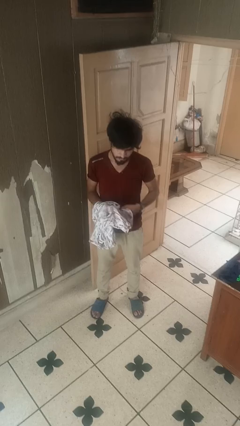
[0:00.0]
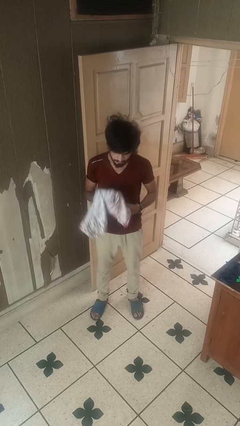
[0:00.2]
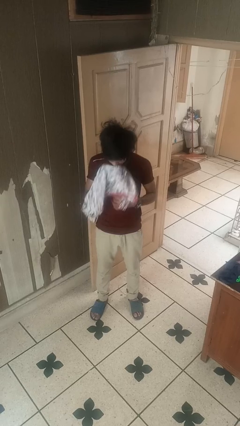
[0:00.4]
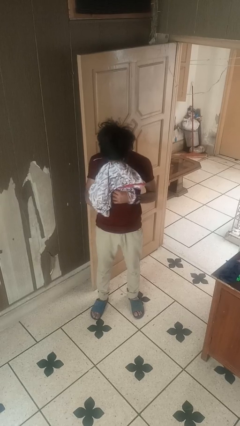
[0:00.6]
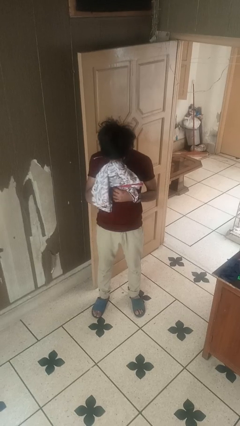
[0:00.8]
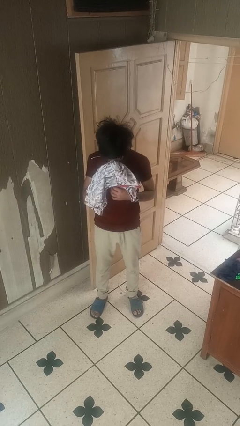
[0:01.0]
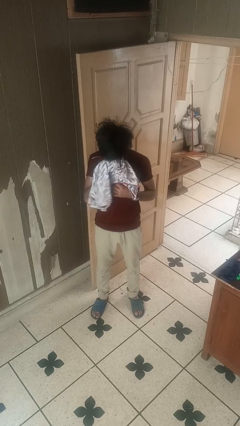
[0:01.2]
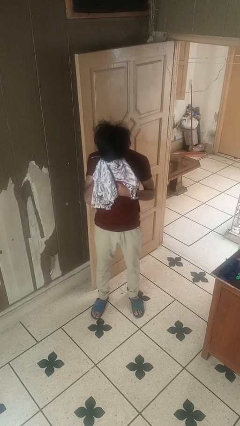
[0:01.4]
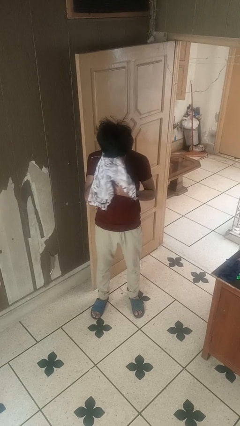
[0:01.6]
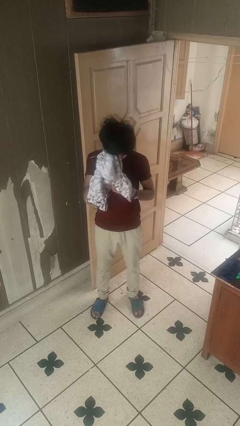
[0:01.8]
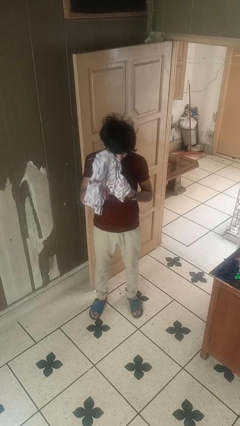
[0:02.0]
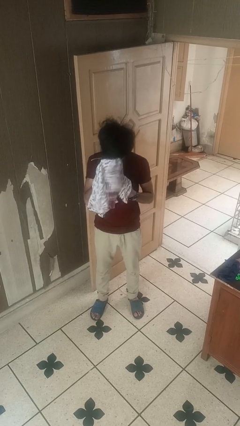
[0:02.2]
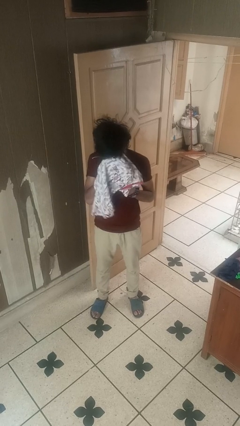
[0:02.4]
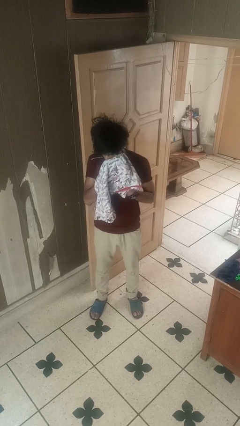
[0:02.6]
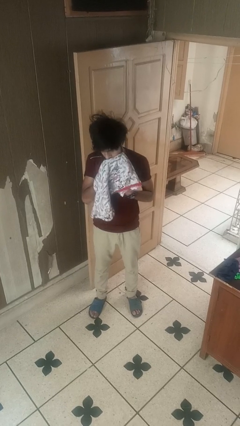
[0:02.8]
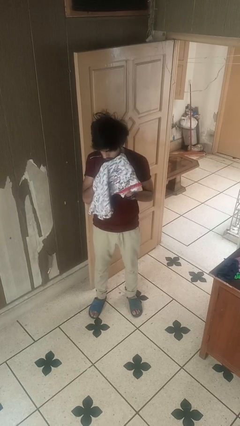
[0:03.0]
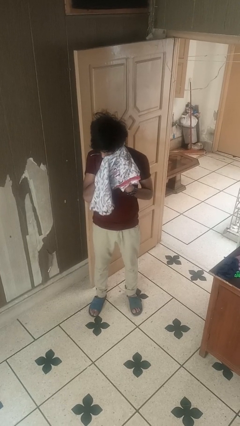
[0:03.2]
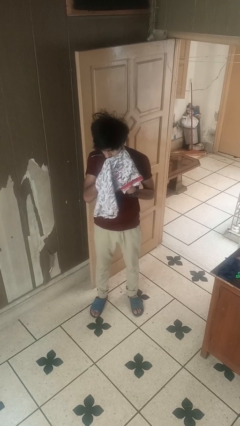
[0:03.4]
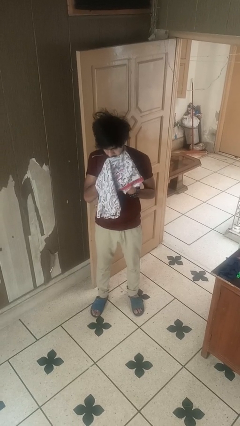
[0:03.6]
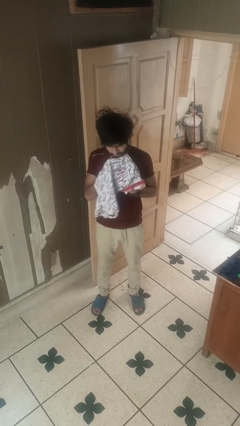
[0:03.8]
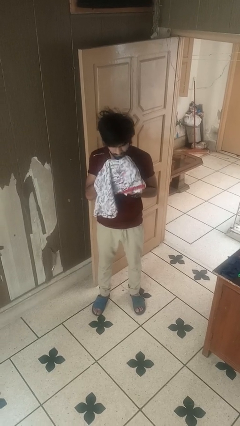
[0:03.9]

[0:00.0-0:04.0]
person wipes mouth with napkin

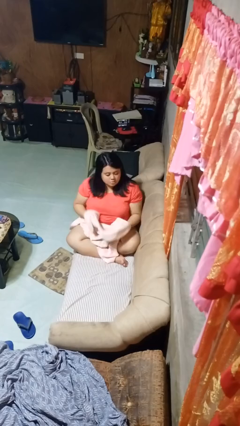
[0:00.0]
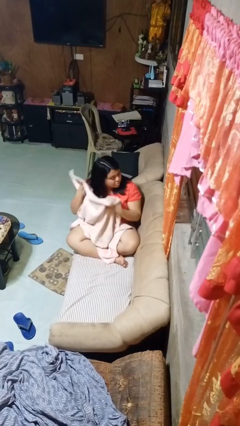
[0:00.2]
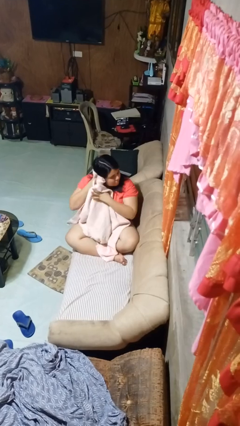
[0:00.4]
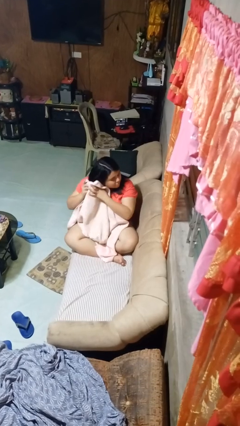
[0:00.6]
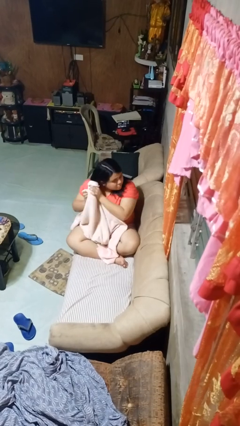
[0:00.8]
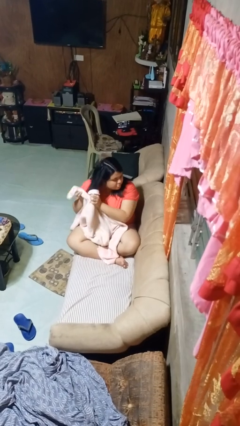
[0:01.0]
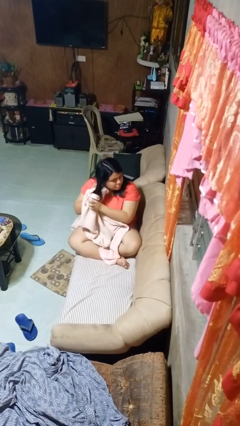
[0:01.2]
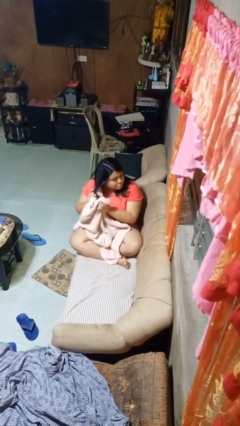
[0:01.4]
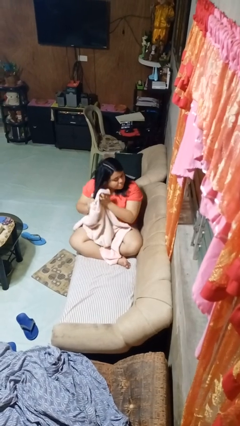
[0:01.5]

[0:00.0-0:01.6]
person dries hair with towel

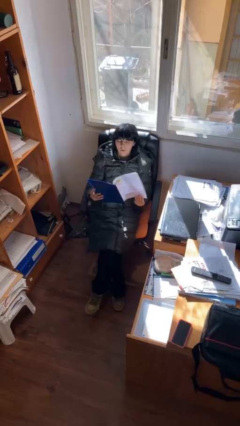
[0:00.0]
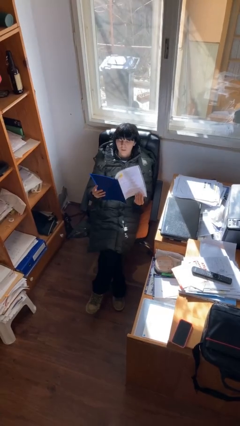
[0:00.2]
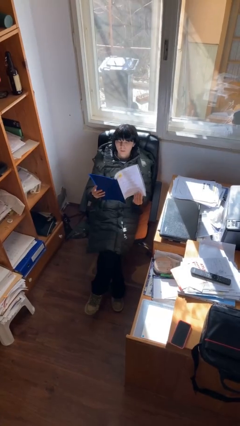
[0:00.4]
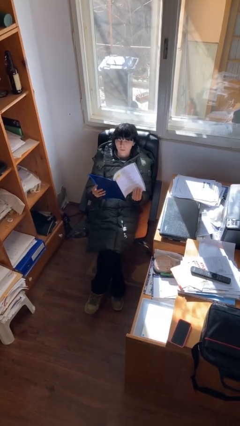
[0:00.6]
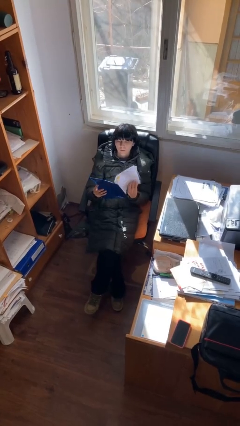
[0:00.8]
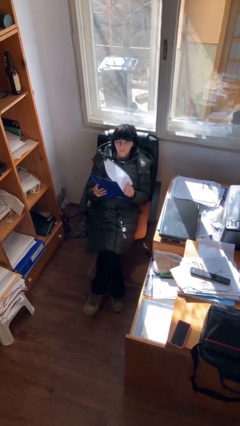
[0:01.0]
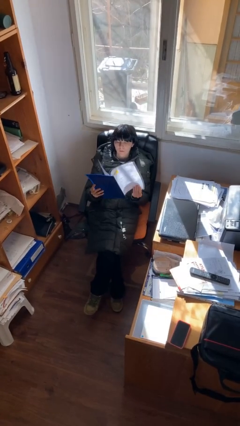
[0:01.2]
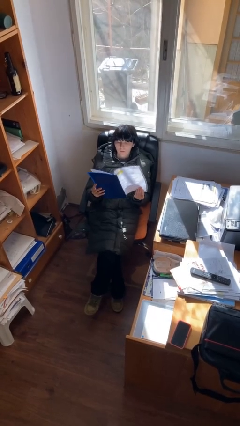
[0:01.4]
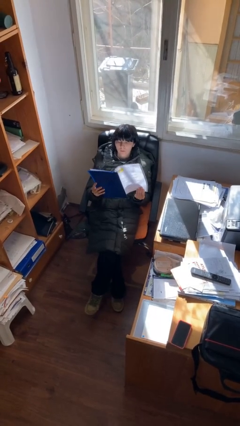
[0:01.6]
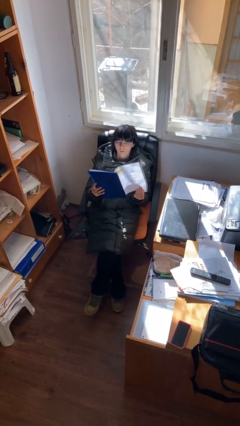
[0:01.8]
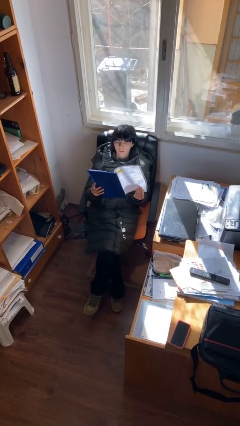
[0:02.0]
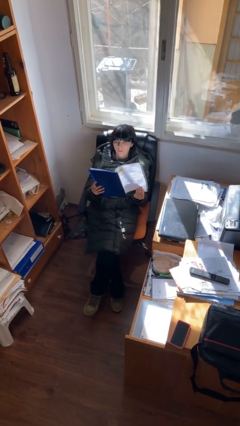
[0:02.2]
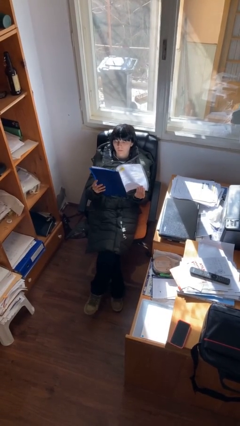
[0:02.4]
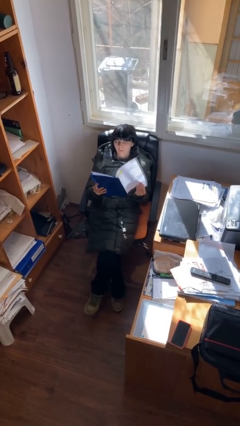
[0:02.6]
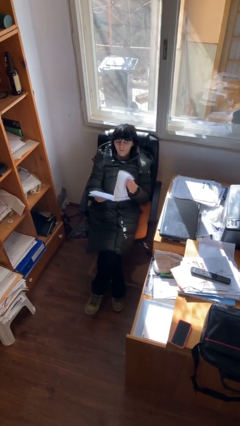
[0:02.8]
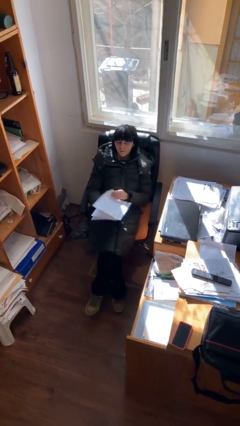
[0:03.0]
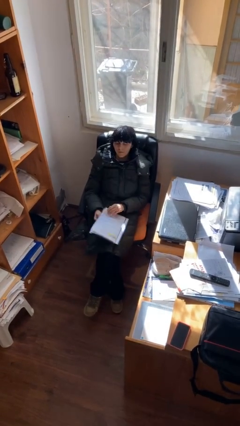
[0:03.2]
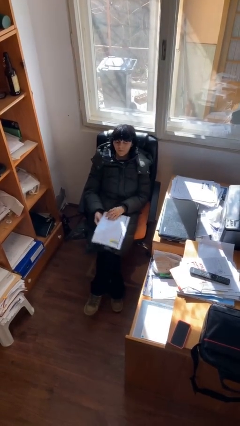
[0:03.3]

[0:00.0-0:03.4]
person reads document

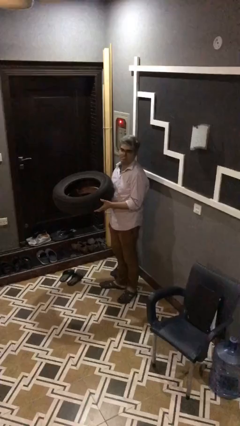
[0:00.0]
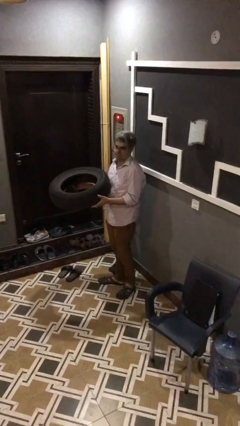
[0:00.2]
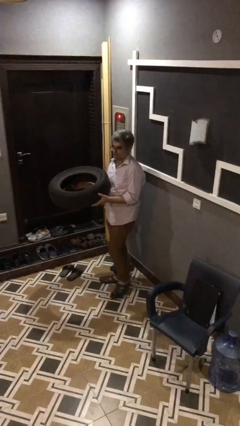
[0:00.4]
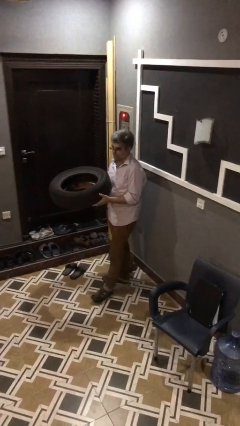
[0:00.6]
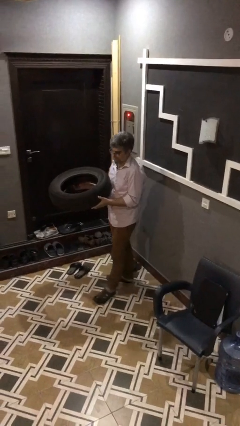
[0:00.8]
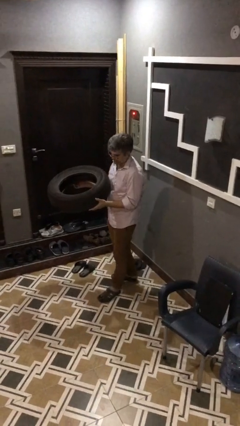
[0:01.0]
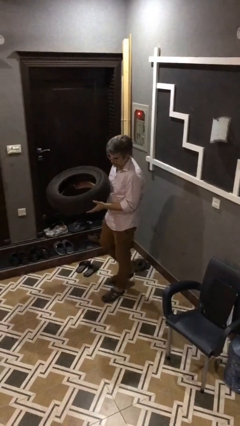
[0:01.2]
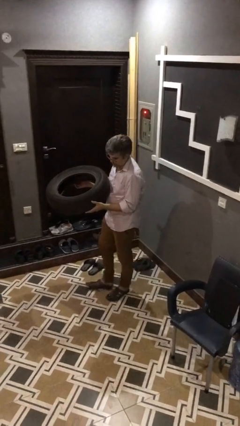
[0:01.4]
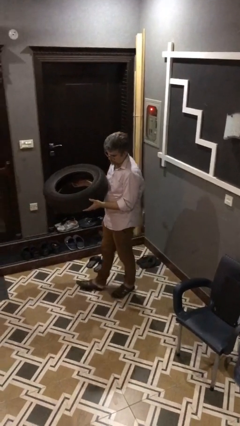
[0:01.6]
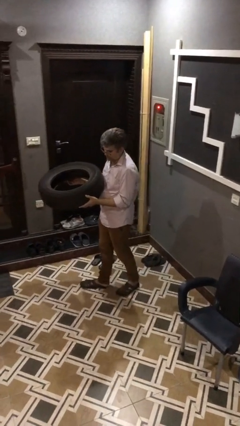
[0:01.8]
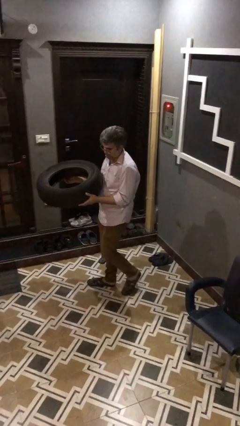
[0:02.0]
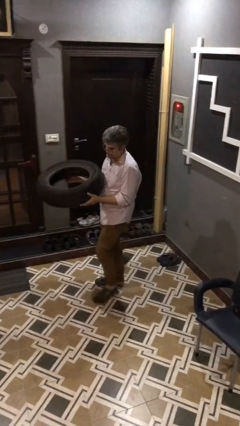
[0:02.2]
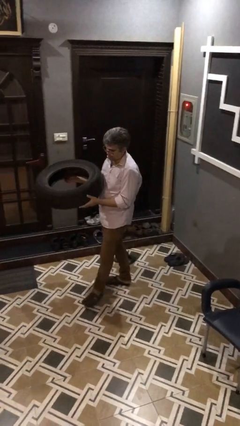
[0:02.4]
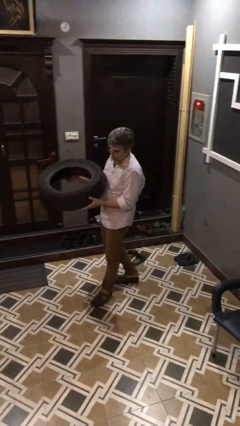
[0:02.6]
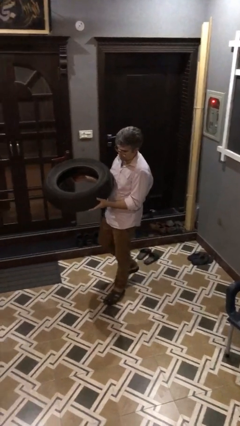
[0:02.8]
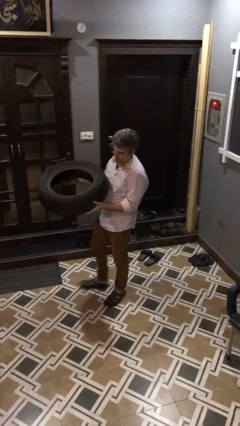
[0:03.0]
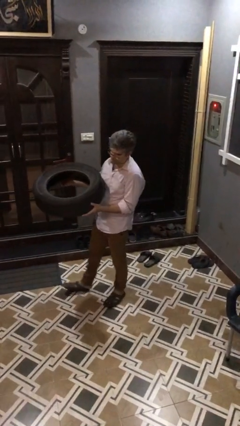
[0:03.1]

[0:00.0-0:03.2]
person carries heavy object

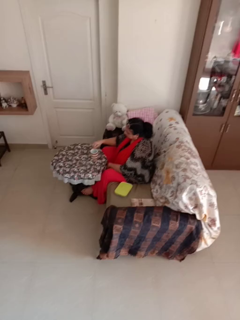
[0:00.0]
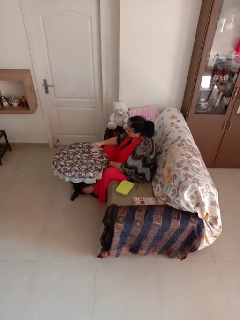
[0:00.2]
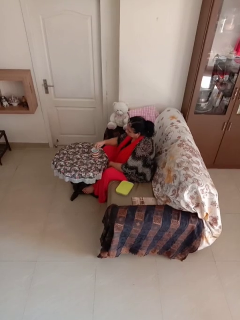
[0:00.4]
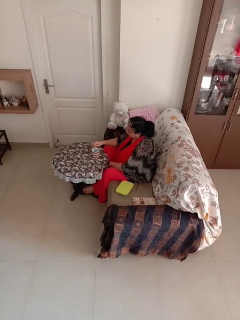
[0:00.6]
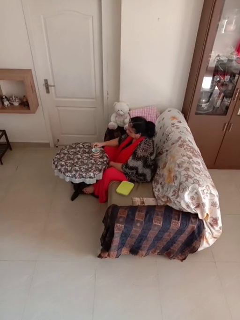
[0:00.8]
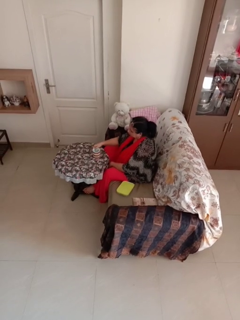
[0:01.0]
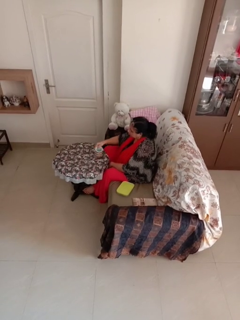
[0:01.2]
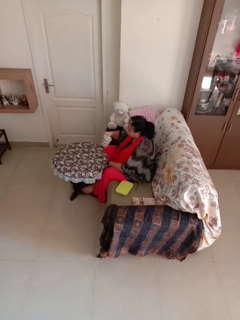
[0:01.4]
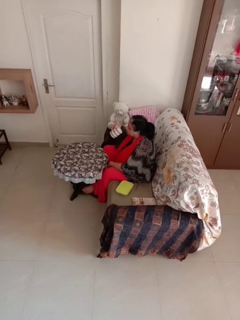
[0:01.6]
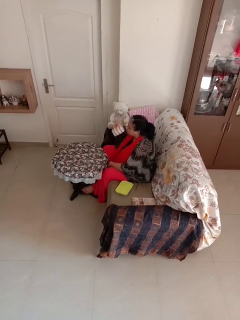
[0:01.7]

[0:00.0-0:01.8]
person stirs mug

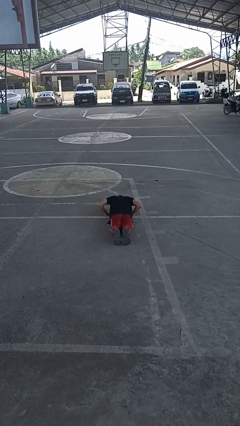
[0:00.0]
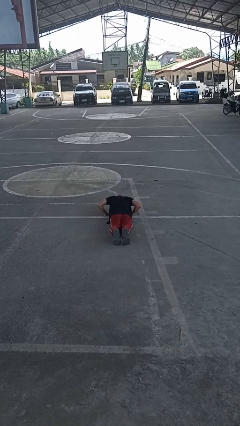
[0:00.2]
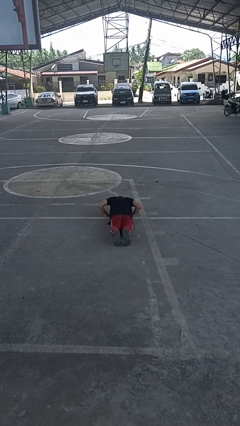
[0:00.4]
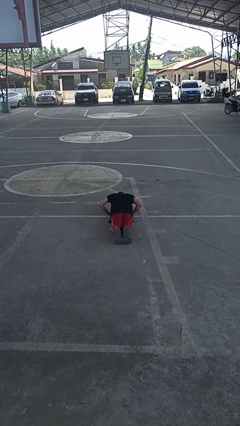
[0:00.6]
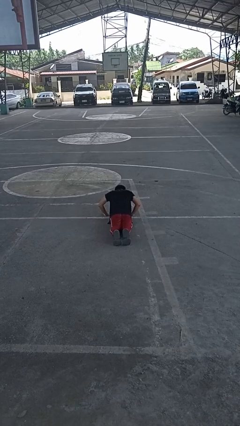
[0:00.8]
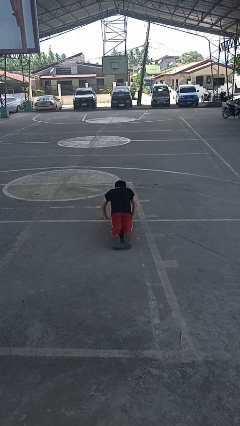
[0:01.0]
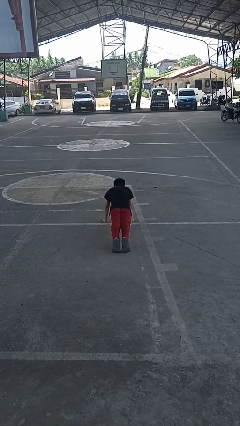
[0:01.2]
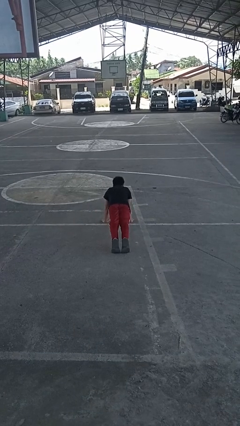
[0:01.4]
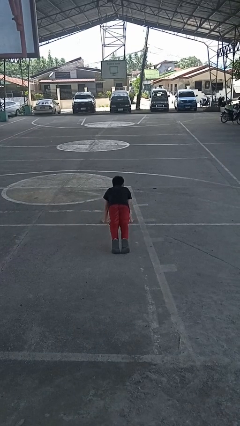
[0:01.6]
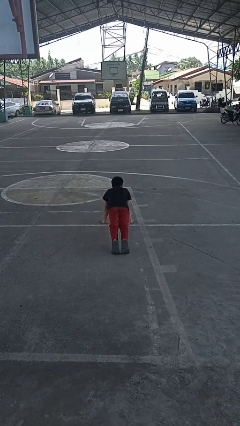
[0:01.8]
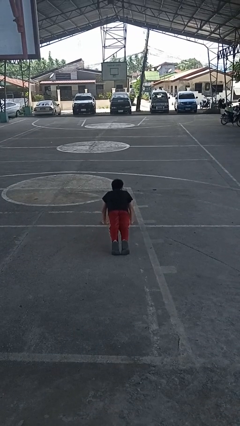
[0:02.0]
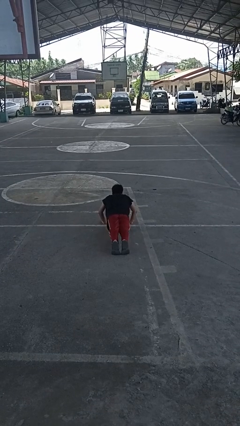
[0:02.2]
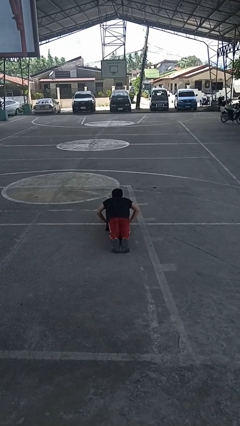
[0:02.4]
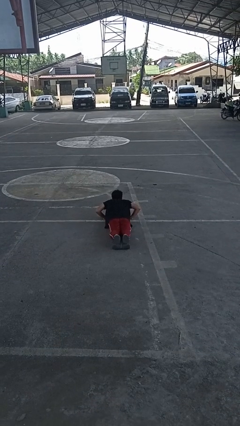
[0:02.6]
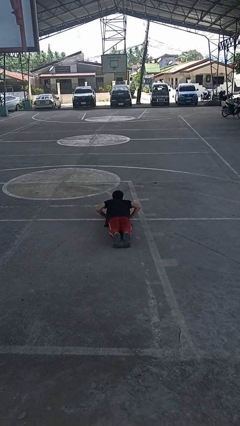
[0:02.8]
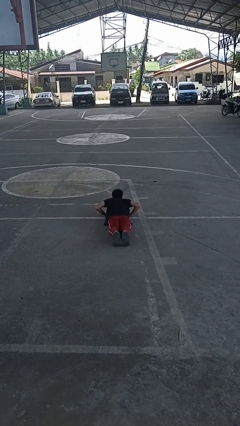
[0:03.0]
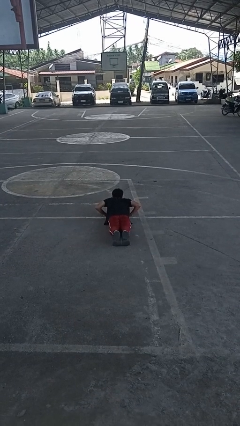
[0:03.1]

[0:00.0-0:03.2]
person exercises with pushup

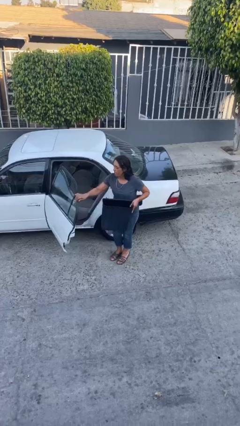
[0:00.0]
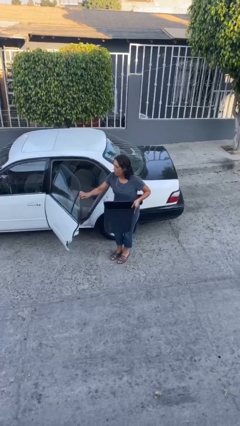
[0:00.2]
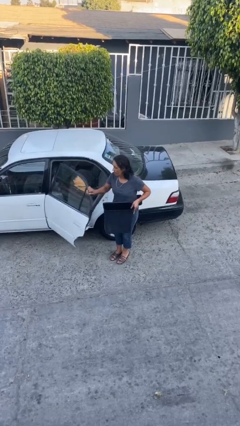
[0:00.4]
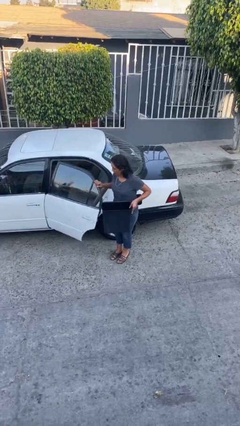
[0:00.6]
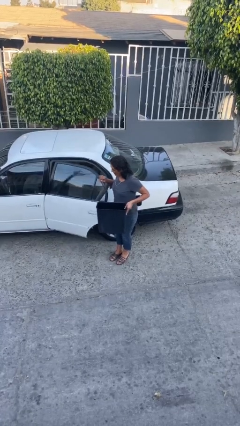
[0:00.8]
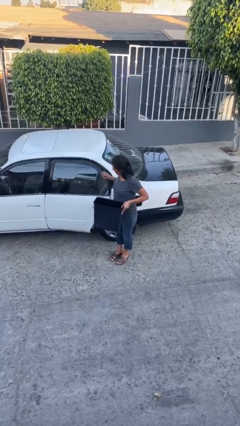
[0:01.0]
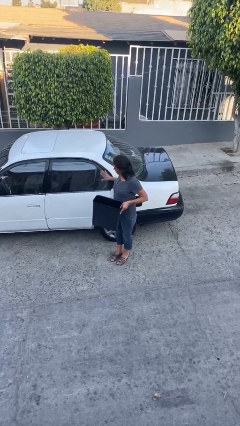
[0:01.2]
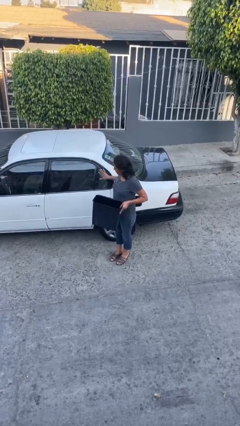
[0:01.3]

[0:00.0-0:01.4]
person closes car door
